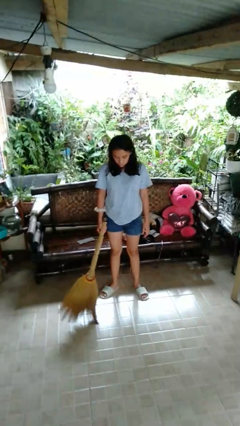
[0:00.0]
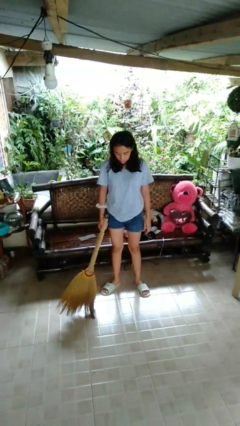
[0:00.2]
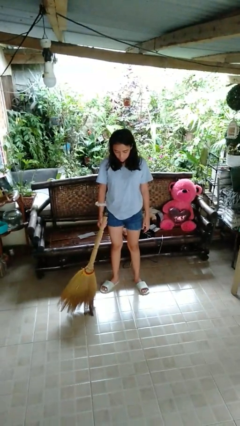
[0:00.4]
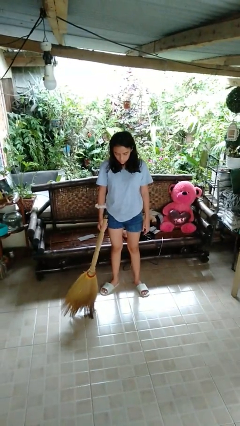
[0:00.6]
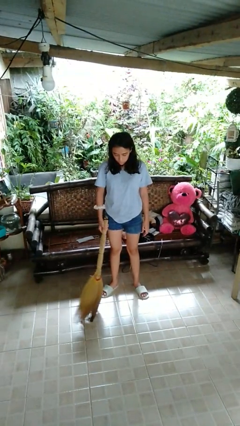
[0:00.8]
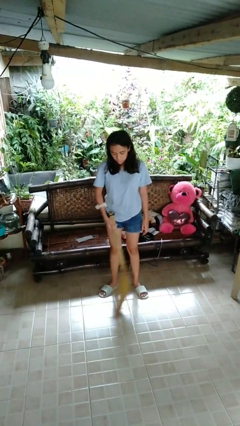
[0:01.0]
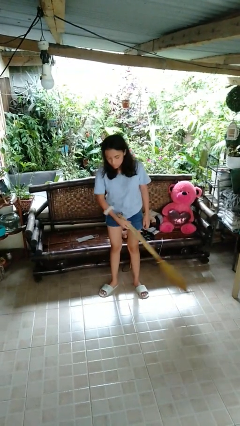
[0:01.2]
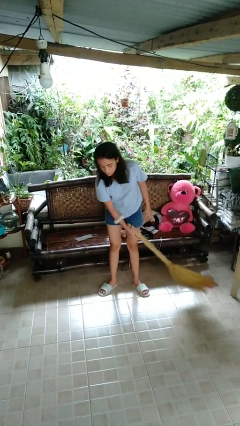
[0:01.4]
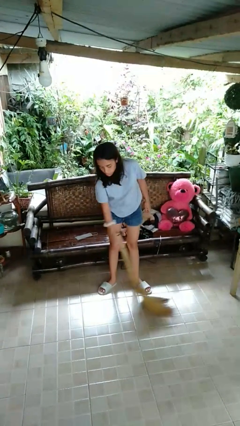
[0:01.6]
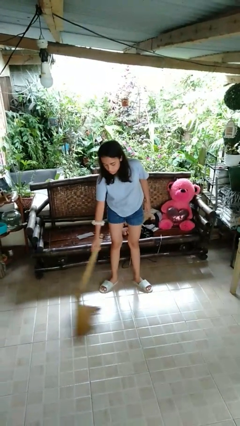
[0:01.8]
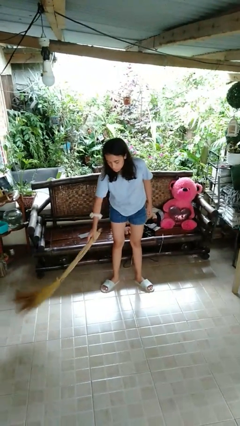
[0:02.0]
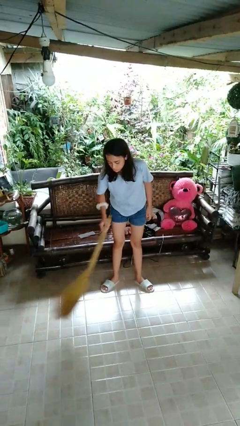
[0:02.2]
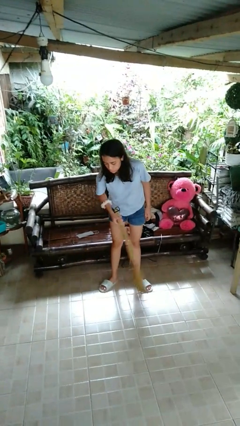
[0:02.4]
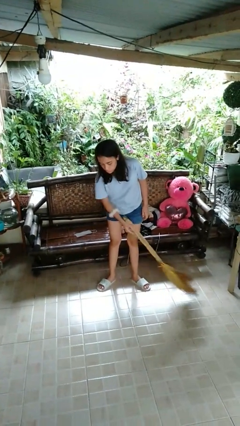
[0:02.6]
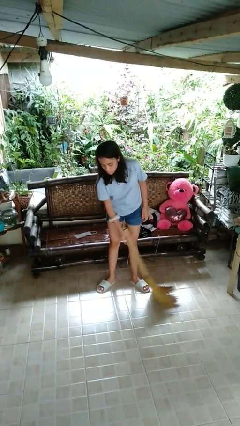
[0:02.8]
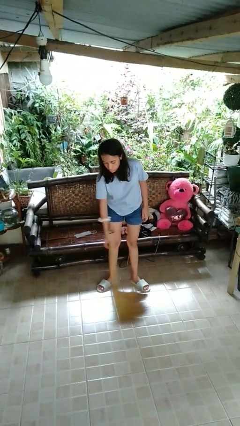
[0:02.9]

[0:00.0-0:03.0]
person sweeps floor

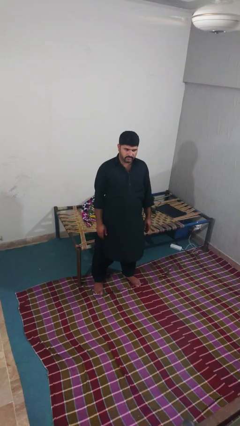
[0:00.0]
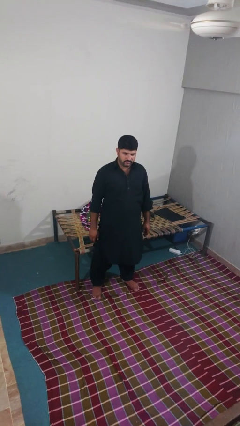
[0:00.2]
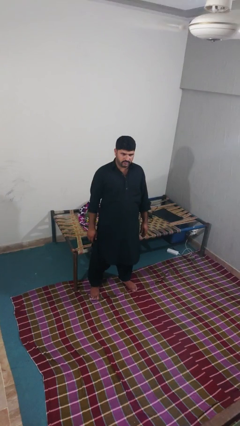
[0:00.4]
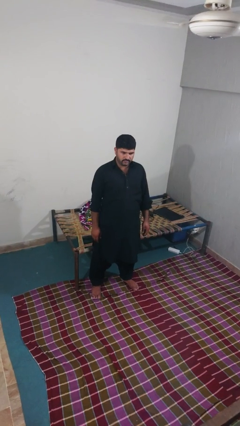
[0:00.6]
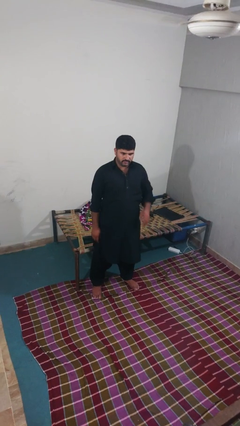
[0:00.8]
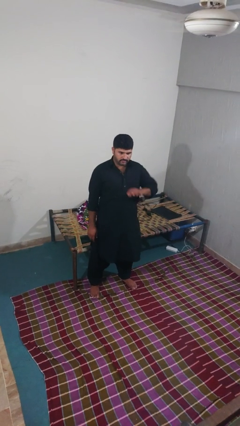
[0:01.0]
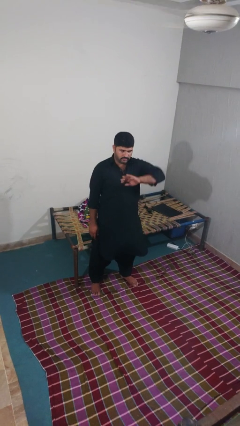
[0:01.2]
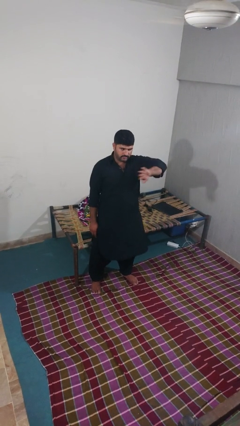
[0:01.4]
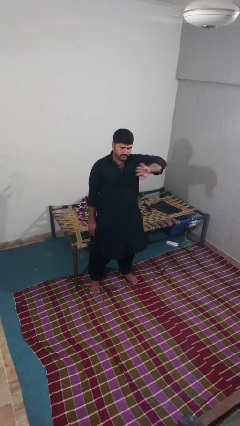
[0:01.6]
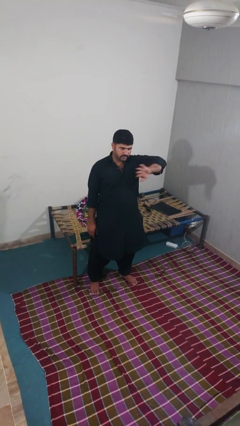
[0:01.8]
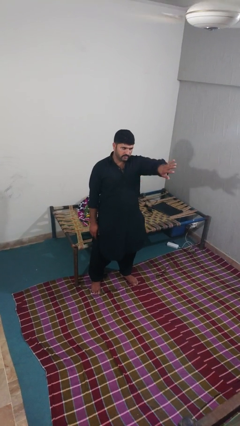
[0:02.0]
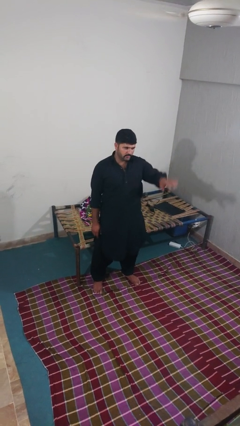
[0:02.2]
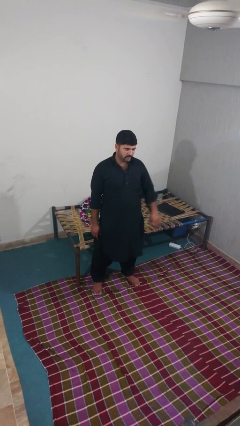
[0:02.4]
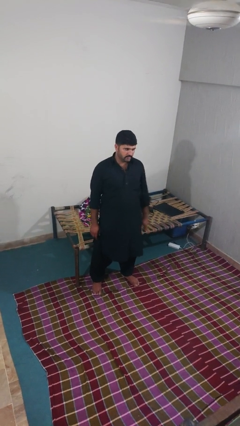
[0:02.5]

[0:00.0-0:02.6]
person gestures swipe left

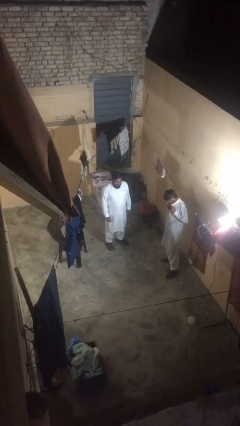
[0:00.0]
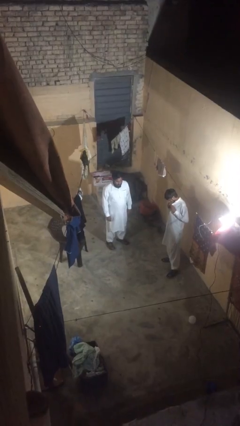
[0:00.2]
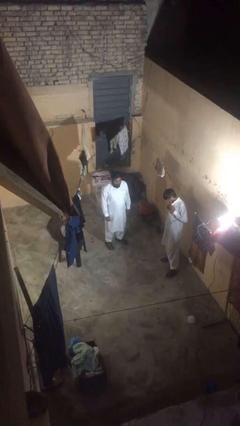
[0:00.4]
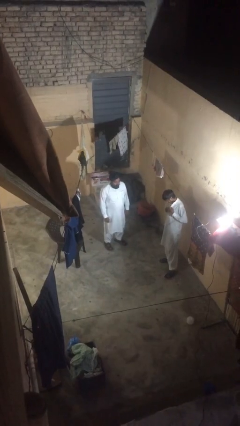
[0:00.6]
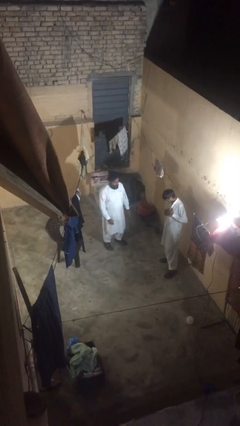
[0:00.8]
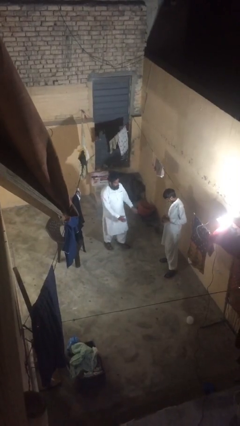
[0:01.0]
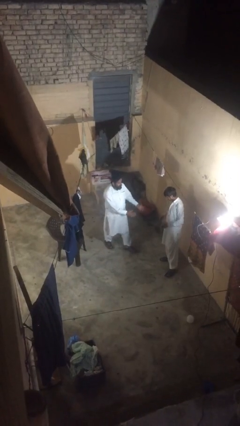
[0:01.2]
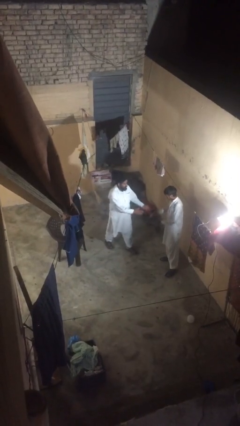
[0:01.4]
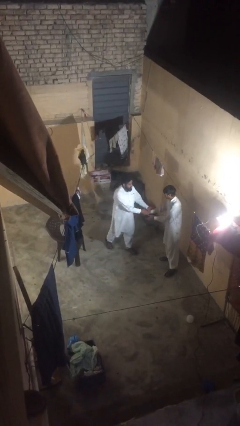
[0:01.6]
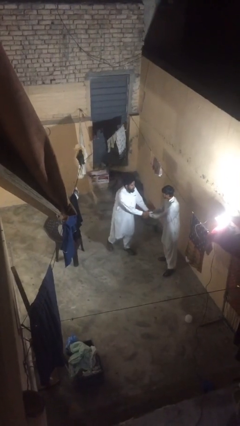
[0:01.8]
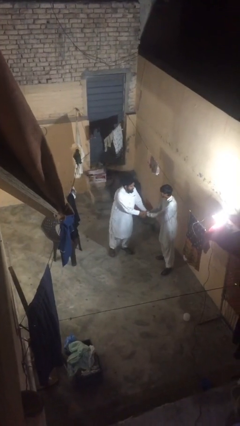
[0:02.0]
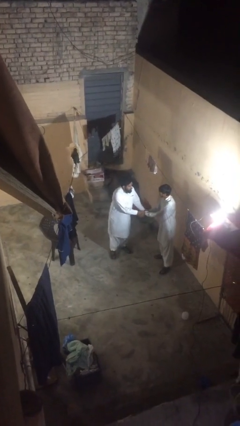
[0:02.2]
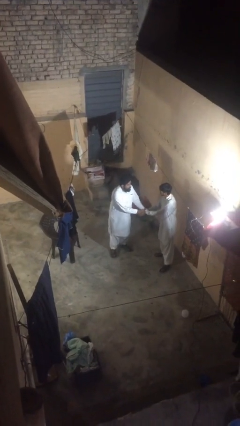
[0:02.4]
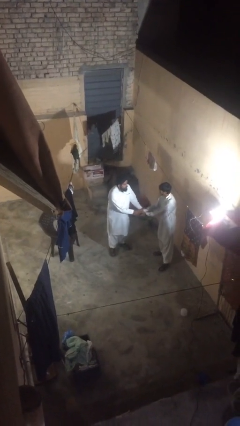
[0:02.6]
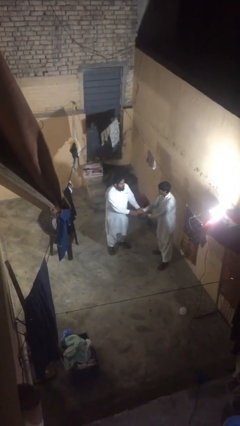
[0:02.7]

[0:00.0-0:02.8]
person shakes hand

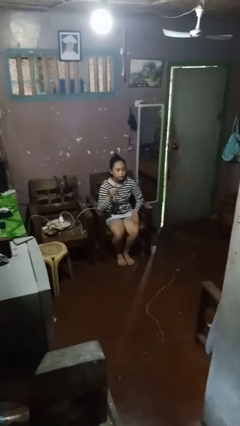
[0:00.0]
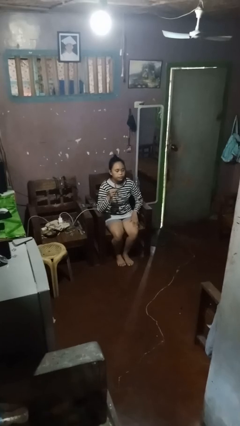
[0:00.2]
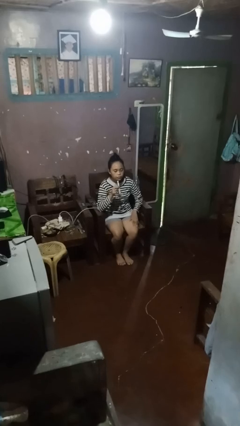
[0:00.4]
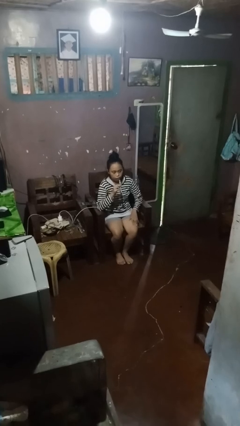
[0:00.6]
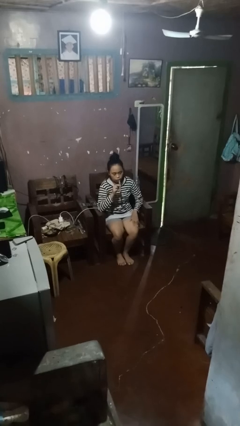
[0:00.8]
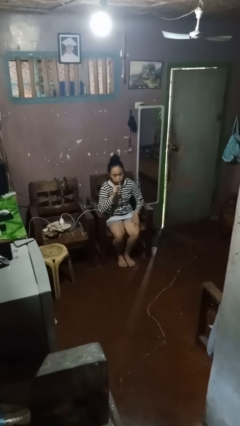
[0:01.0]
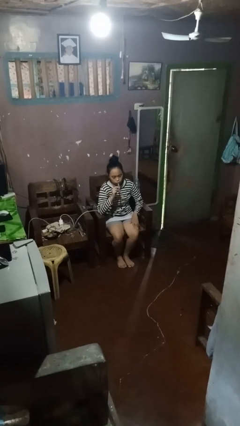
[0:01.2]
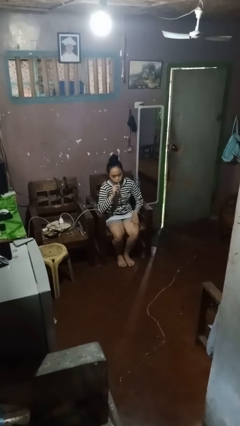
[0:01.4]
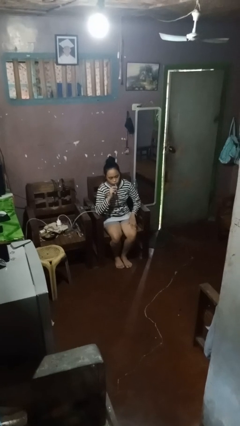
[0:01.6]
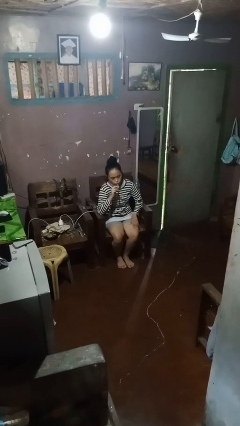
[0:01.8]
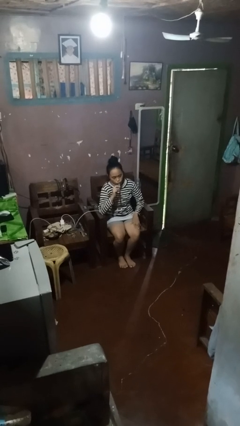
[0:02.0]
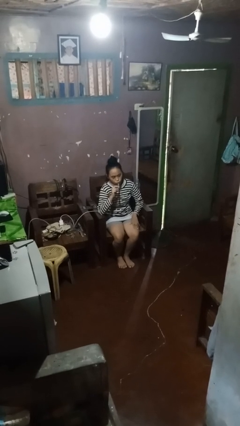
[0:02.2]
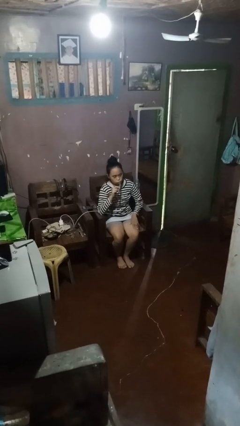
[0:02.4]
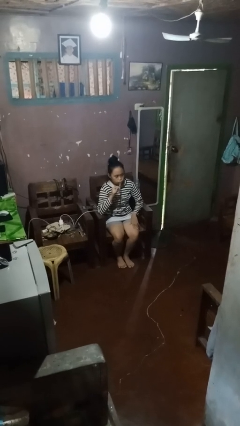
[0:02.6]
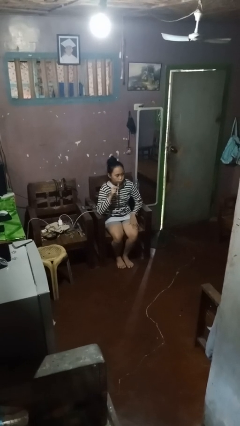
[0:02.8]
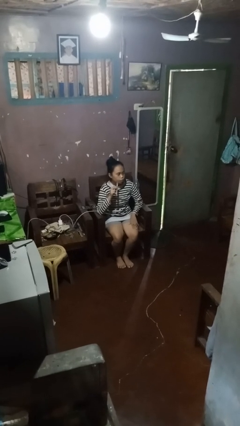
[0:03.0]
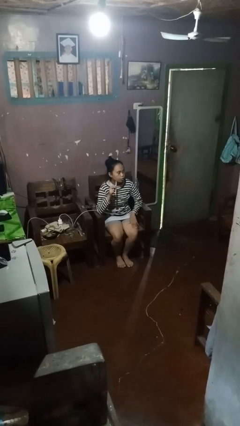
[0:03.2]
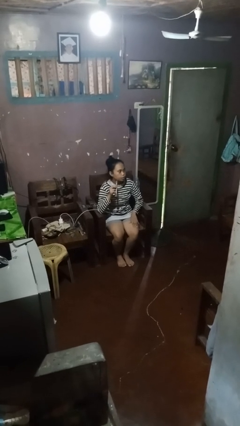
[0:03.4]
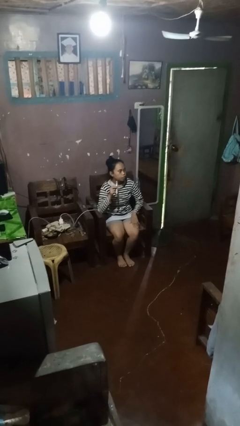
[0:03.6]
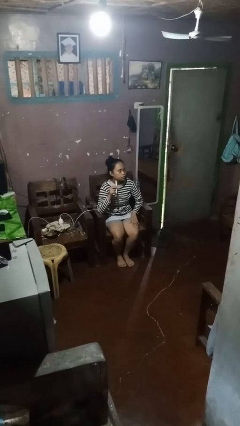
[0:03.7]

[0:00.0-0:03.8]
person vapes

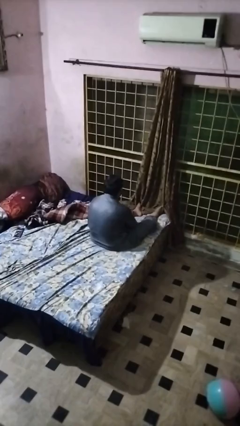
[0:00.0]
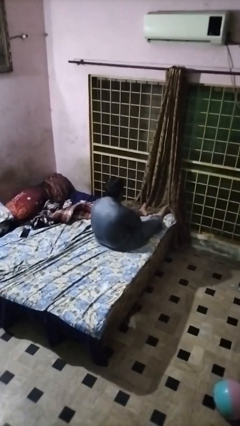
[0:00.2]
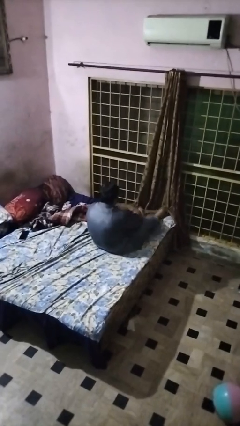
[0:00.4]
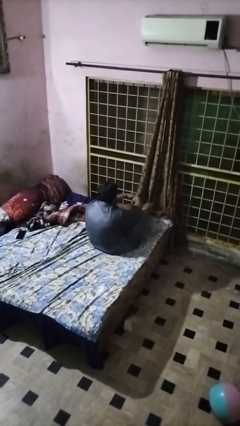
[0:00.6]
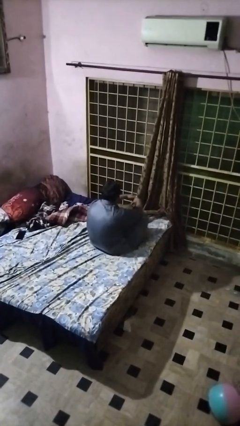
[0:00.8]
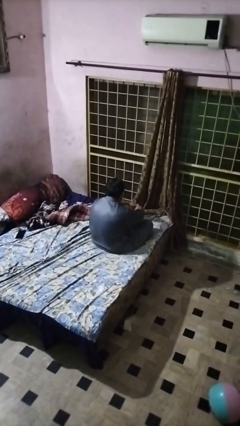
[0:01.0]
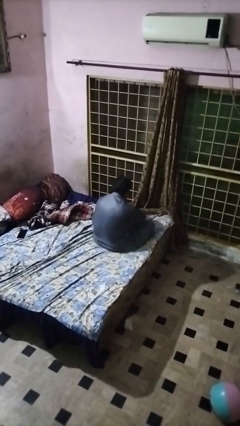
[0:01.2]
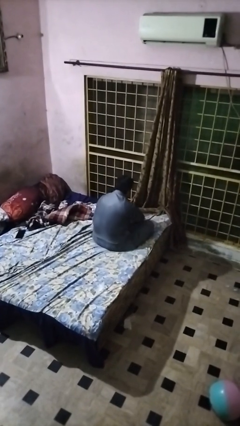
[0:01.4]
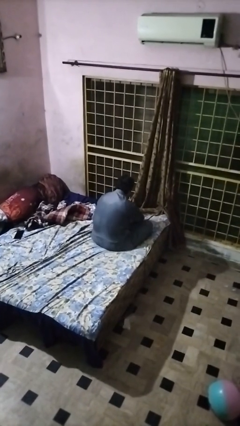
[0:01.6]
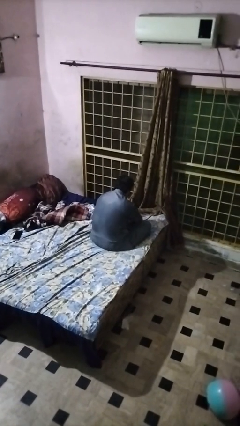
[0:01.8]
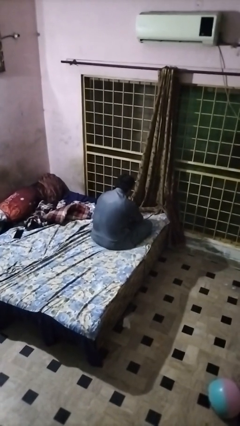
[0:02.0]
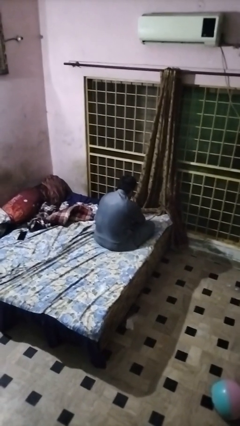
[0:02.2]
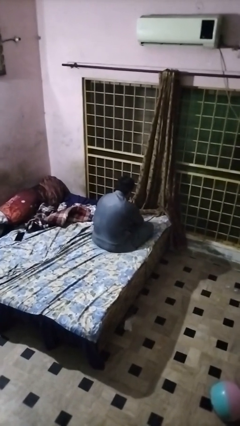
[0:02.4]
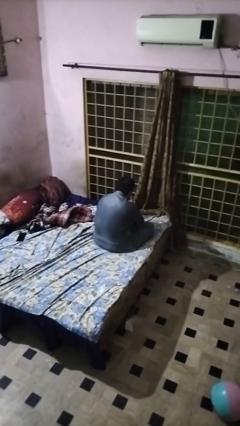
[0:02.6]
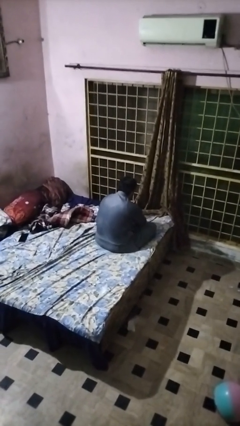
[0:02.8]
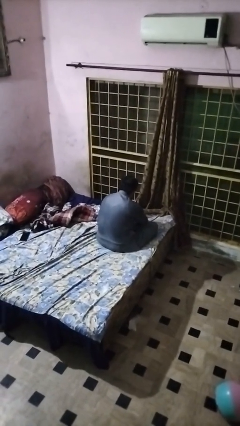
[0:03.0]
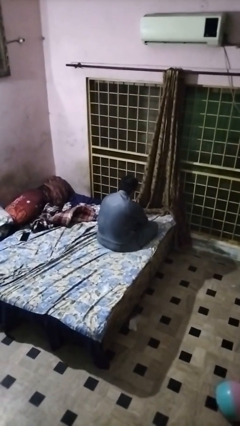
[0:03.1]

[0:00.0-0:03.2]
person crosses legs

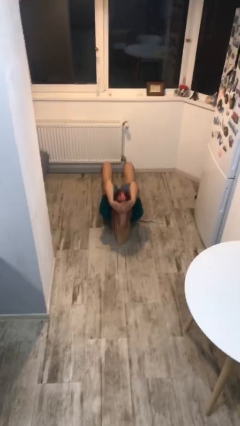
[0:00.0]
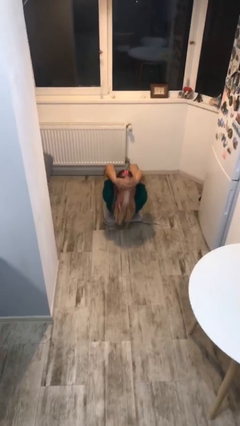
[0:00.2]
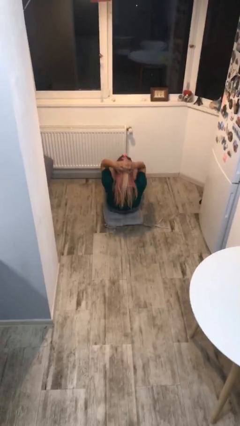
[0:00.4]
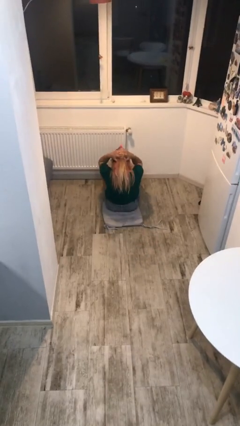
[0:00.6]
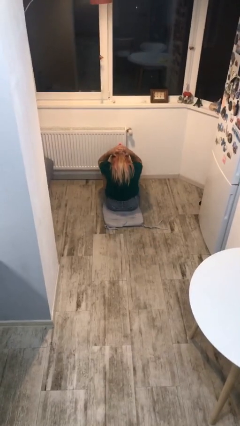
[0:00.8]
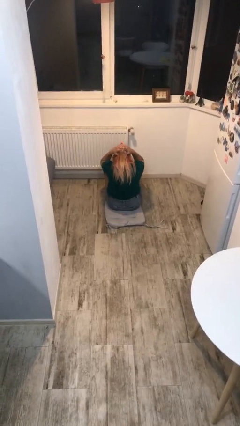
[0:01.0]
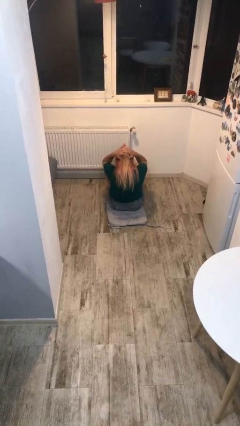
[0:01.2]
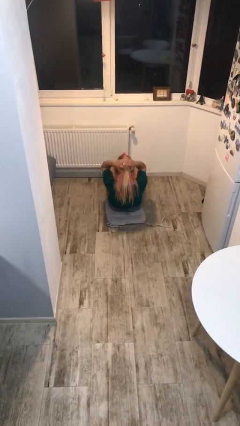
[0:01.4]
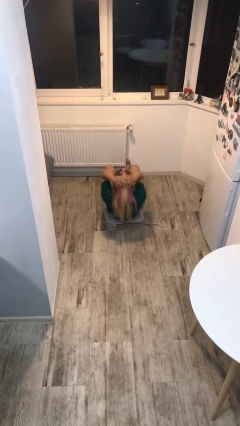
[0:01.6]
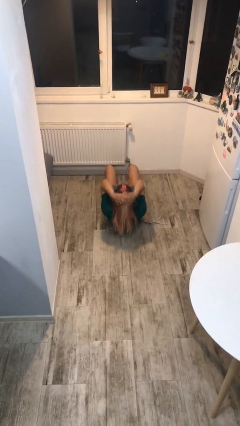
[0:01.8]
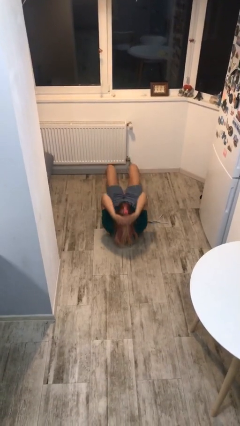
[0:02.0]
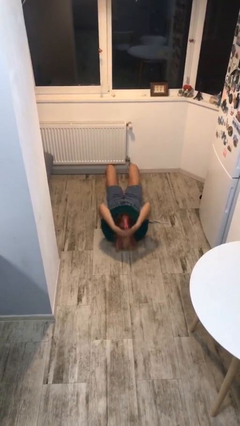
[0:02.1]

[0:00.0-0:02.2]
person exercises with situp
